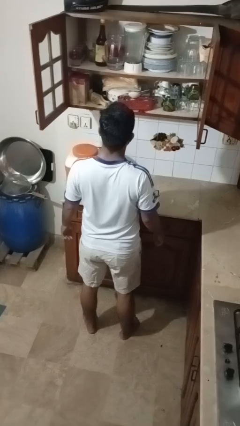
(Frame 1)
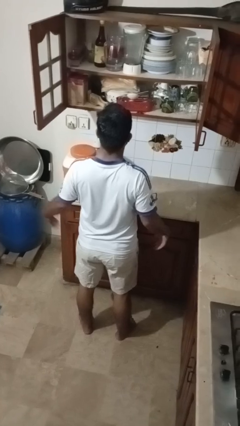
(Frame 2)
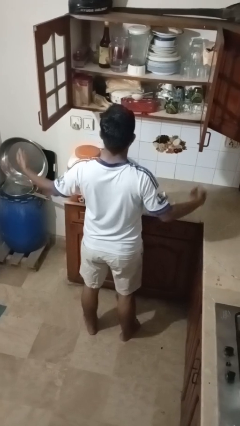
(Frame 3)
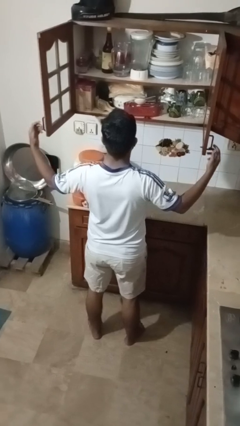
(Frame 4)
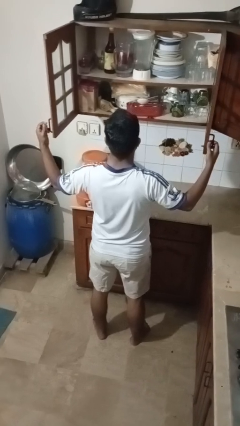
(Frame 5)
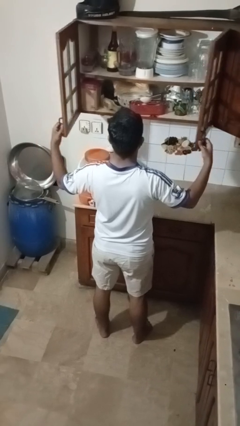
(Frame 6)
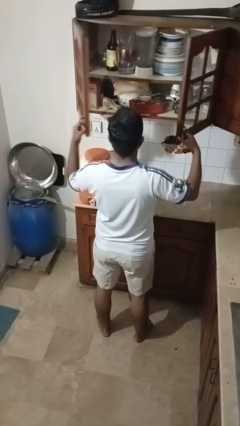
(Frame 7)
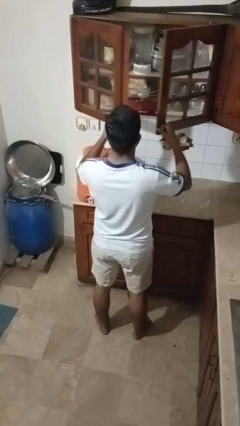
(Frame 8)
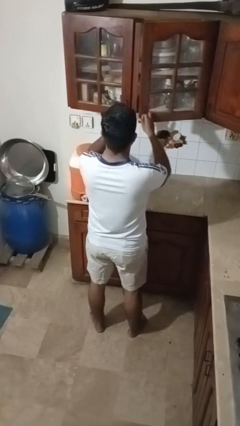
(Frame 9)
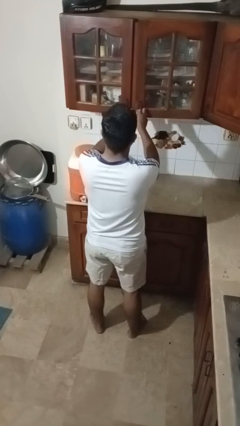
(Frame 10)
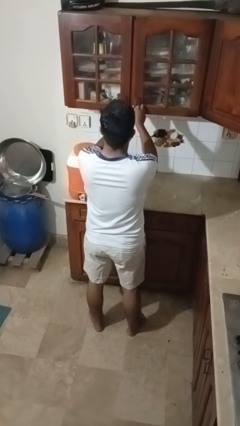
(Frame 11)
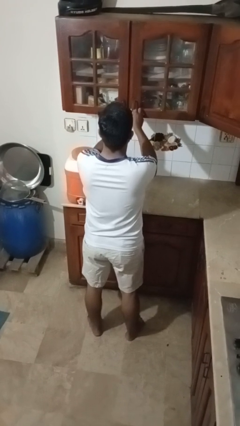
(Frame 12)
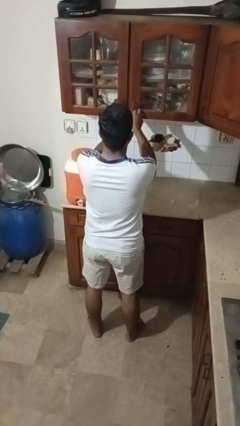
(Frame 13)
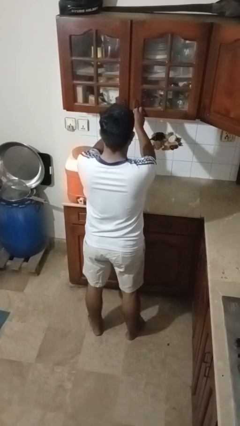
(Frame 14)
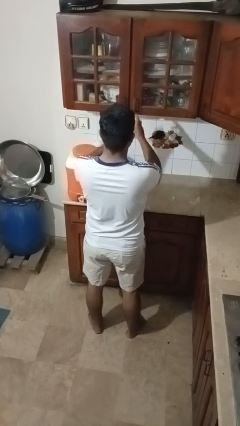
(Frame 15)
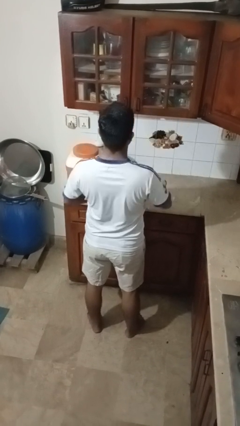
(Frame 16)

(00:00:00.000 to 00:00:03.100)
person closes cabinet

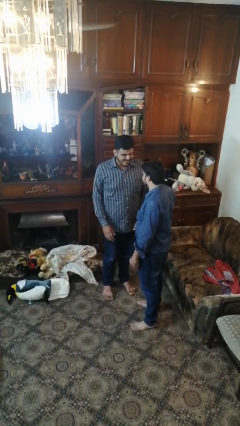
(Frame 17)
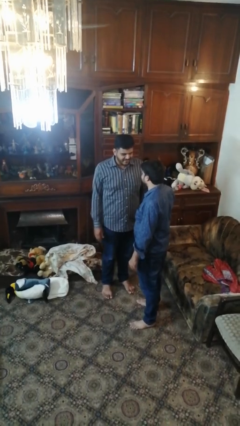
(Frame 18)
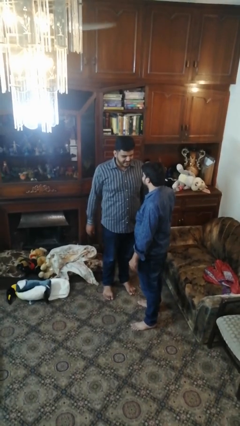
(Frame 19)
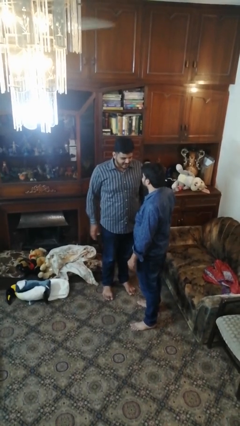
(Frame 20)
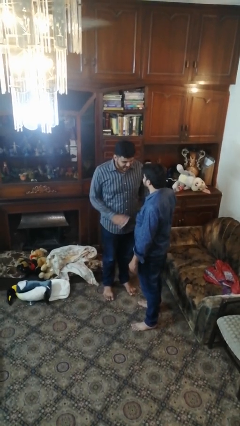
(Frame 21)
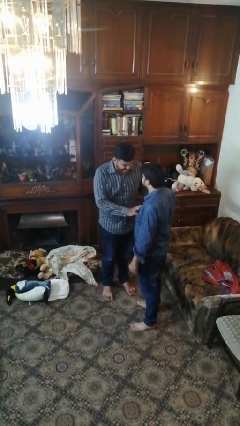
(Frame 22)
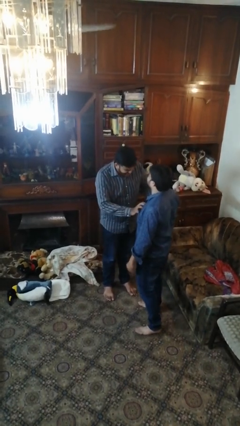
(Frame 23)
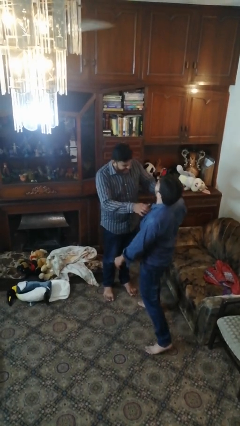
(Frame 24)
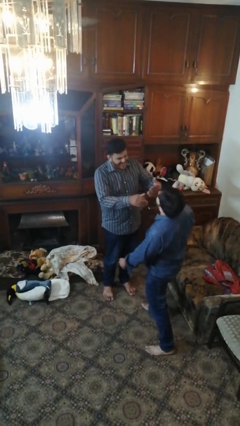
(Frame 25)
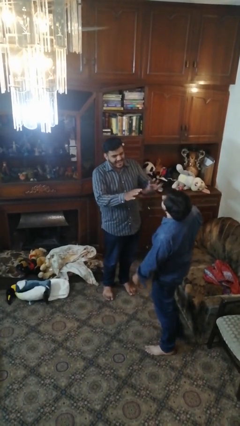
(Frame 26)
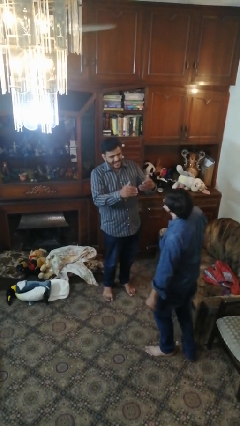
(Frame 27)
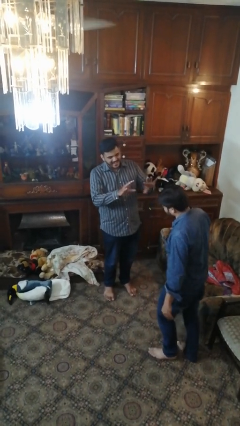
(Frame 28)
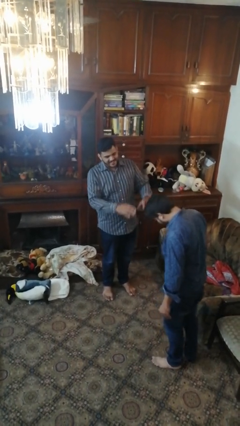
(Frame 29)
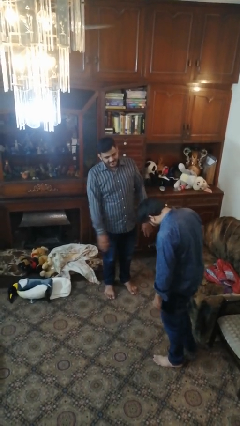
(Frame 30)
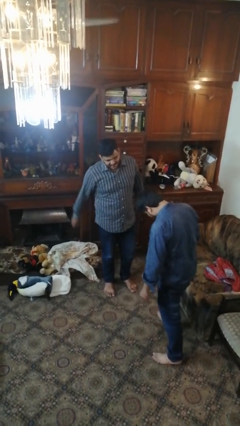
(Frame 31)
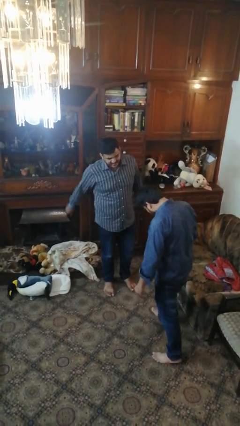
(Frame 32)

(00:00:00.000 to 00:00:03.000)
person shoves person

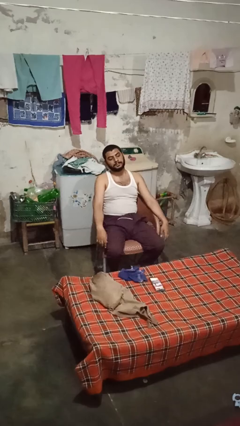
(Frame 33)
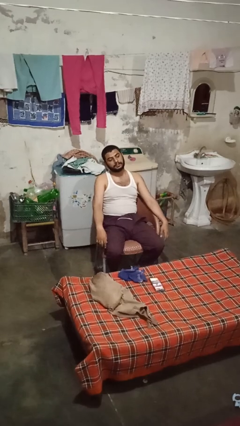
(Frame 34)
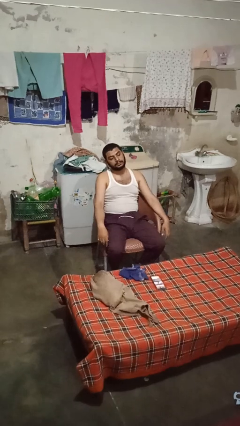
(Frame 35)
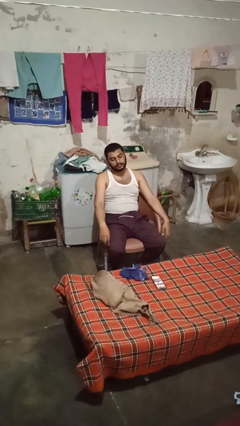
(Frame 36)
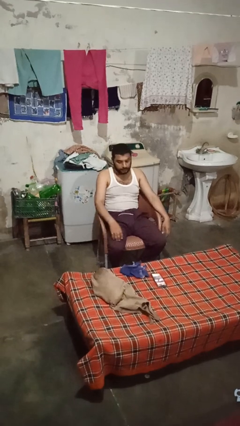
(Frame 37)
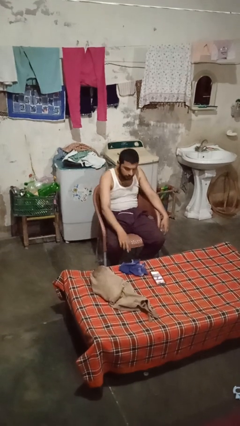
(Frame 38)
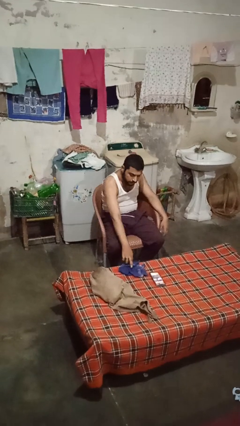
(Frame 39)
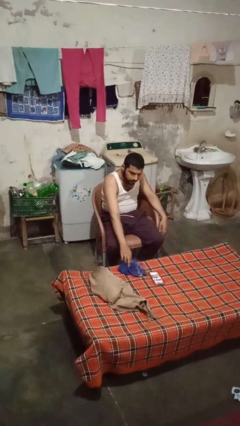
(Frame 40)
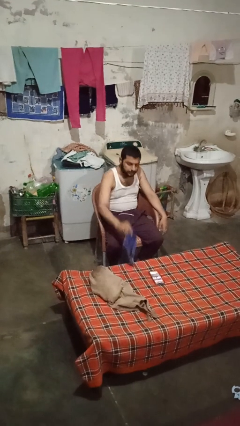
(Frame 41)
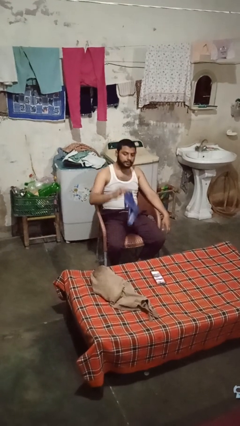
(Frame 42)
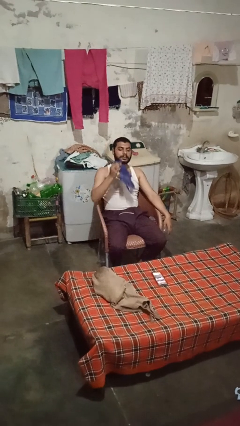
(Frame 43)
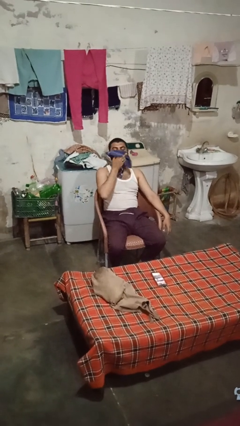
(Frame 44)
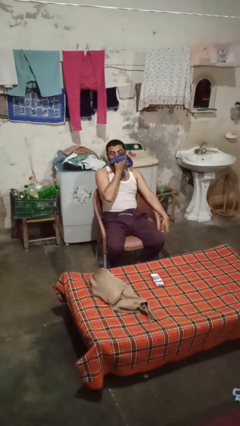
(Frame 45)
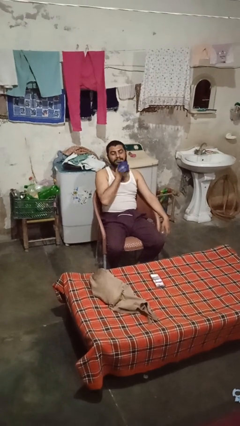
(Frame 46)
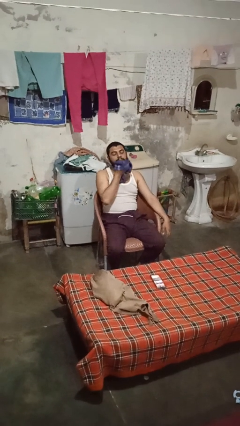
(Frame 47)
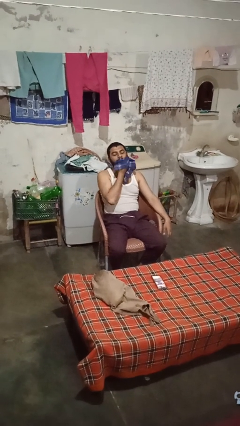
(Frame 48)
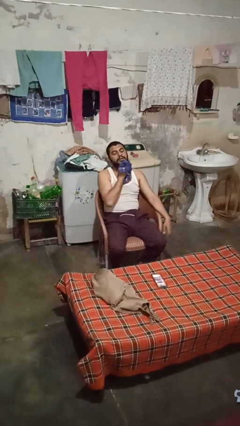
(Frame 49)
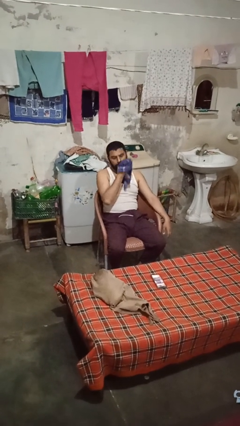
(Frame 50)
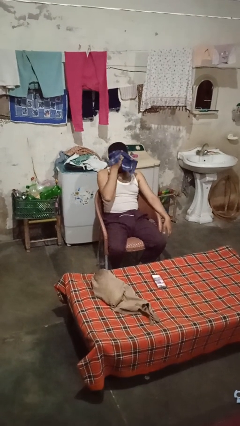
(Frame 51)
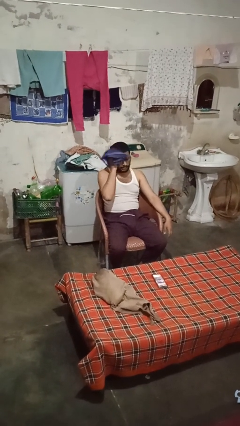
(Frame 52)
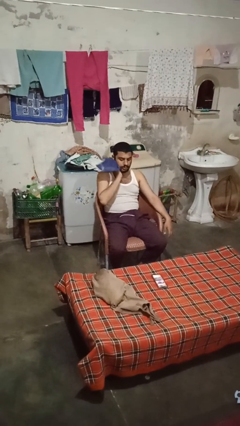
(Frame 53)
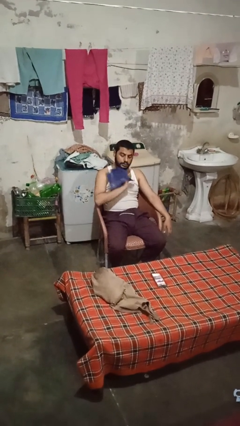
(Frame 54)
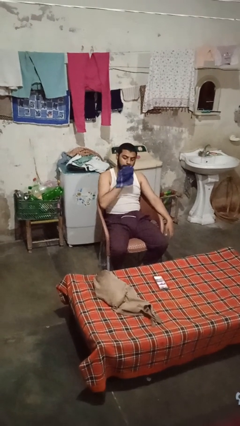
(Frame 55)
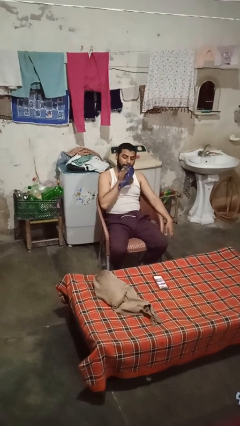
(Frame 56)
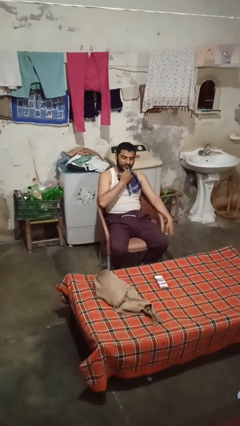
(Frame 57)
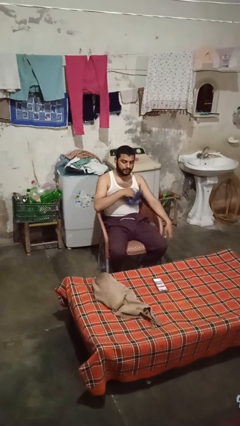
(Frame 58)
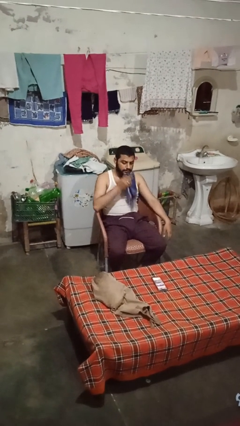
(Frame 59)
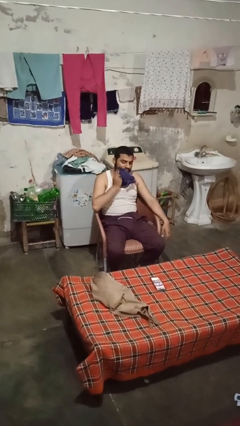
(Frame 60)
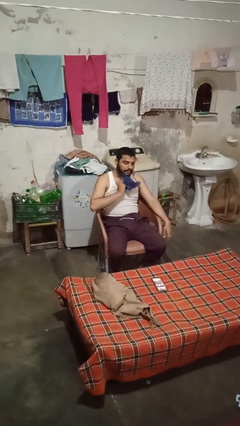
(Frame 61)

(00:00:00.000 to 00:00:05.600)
person wipes mouth with napkin

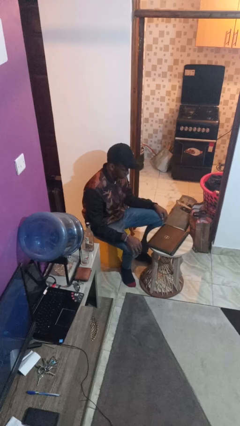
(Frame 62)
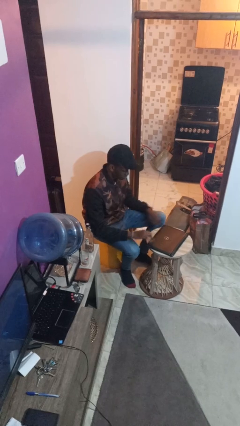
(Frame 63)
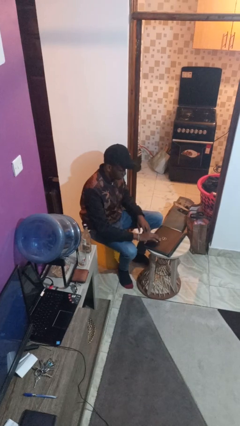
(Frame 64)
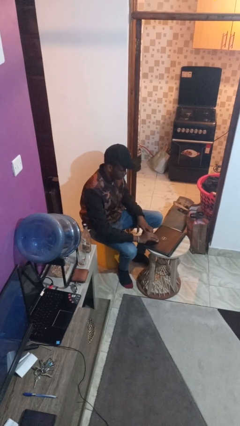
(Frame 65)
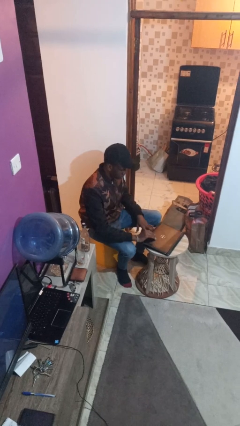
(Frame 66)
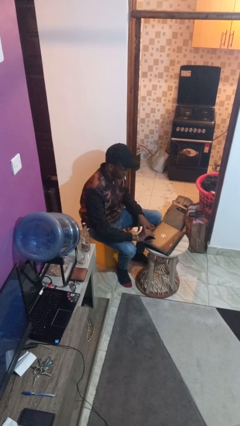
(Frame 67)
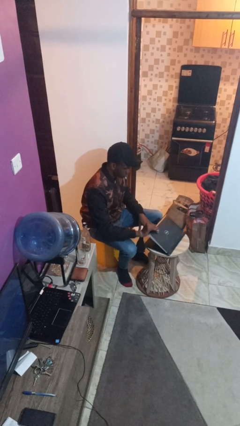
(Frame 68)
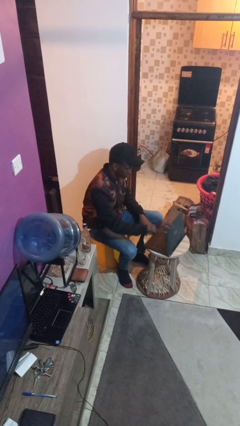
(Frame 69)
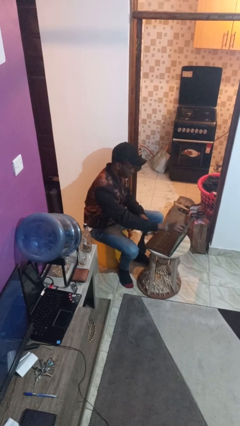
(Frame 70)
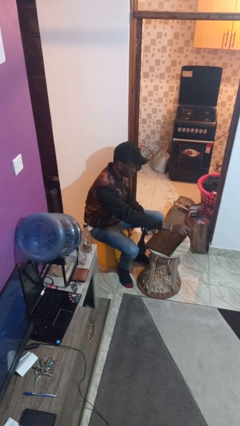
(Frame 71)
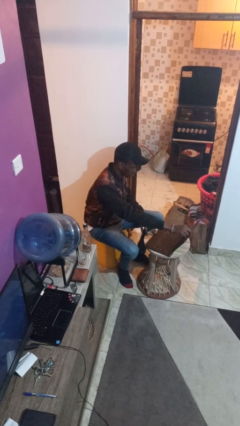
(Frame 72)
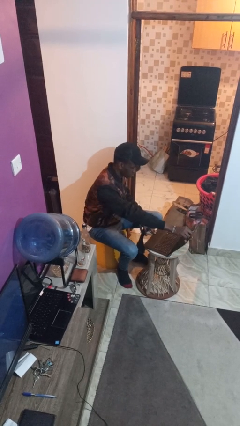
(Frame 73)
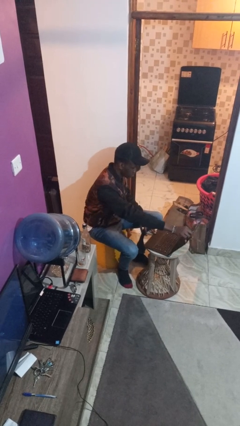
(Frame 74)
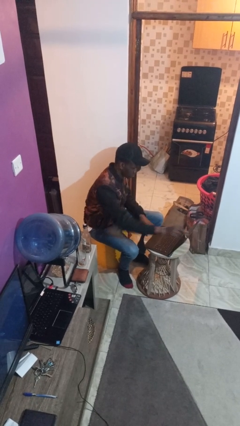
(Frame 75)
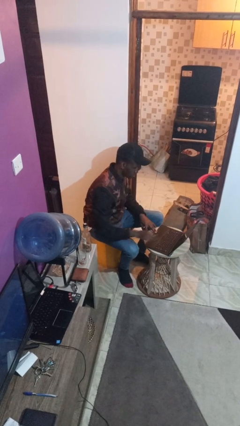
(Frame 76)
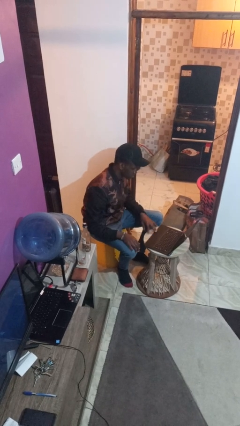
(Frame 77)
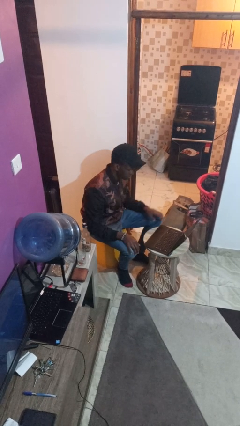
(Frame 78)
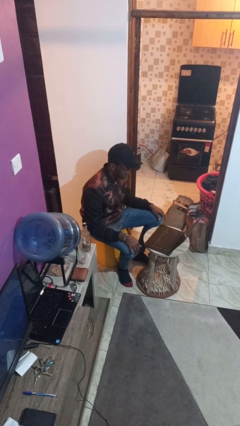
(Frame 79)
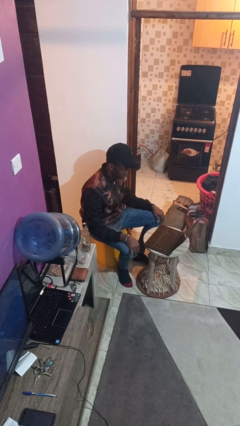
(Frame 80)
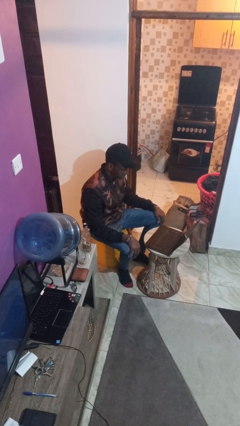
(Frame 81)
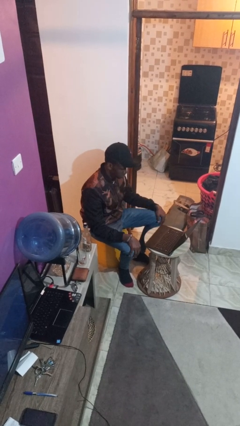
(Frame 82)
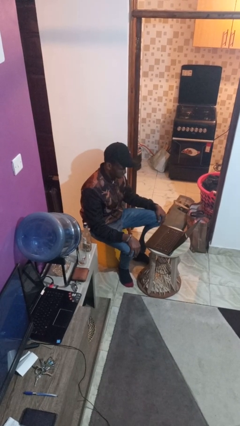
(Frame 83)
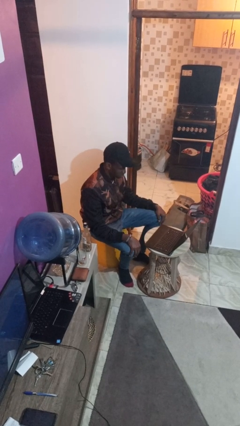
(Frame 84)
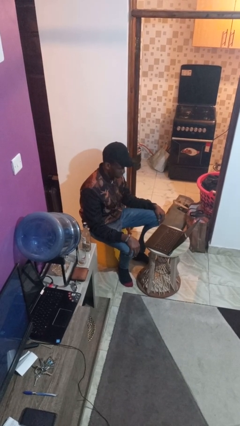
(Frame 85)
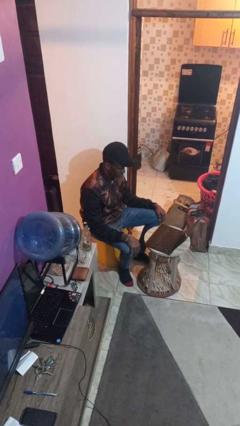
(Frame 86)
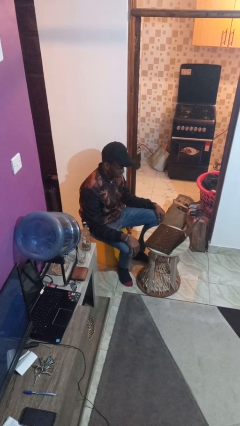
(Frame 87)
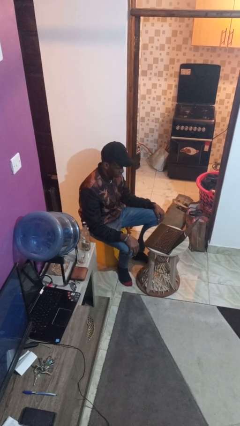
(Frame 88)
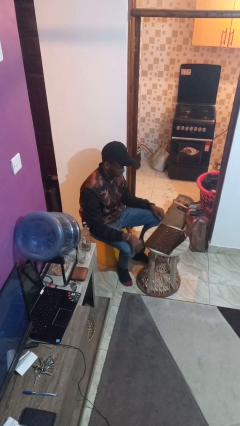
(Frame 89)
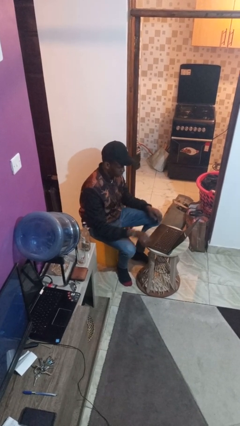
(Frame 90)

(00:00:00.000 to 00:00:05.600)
person opens laptop

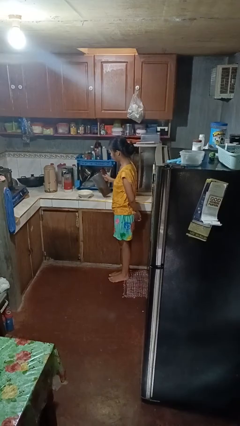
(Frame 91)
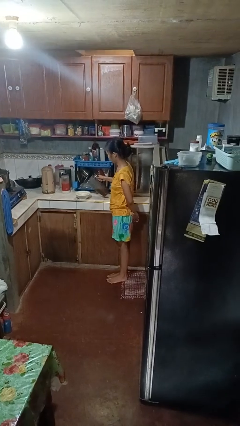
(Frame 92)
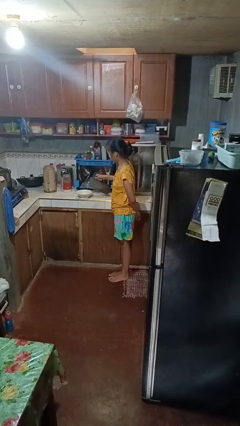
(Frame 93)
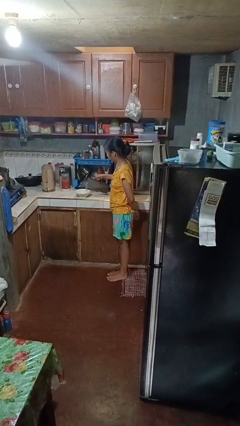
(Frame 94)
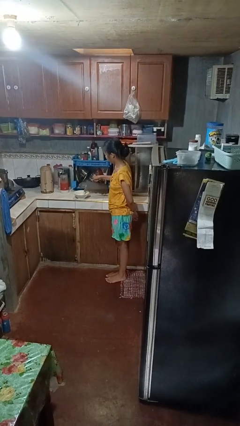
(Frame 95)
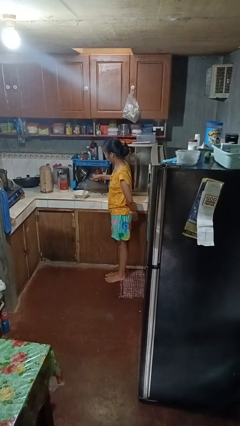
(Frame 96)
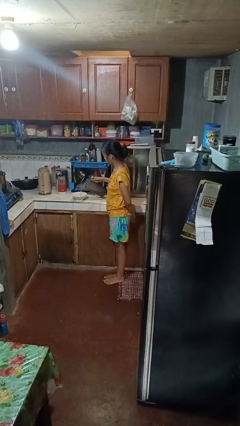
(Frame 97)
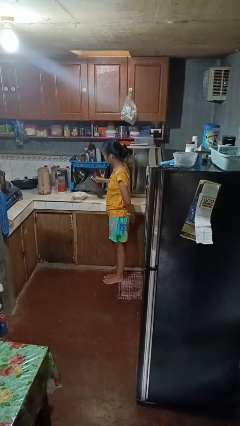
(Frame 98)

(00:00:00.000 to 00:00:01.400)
person pours into bowl
